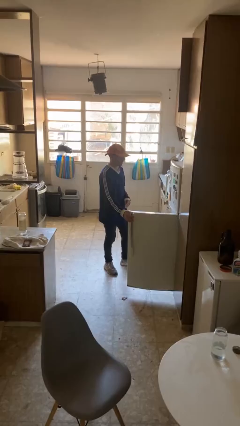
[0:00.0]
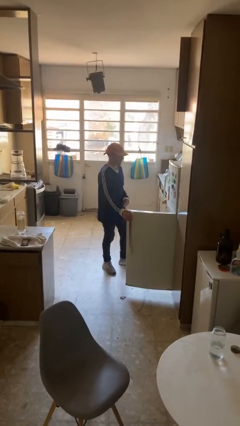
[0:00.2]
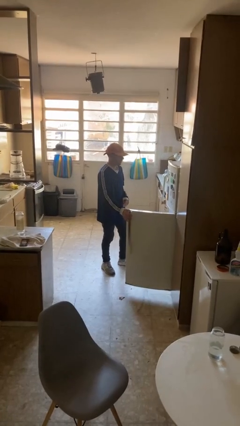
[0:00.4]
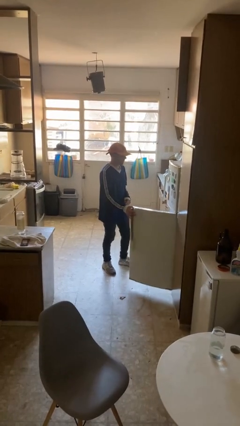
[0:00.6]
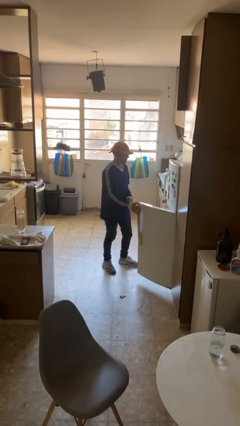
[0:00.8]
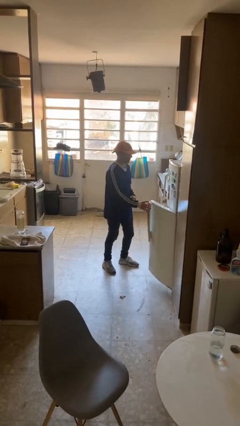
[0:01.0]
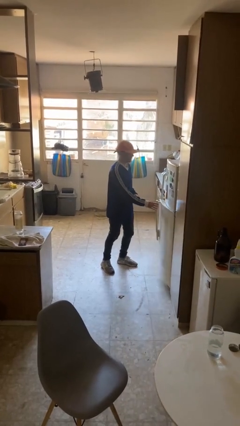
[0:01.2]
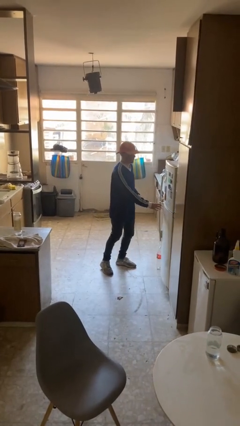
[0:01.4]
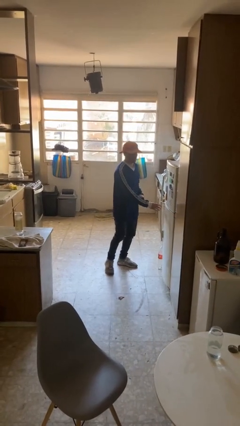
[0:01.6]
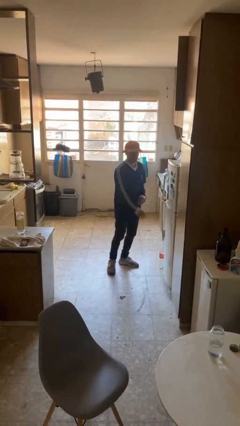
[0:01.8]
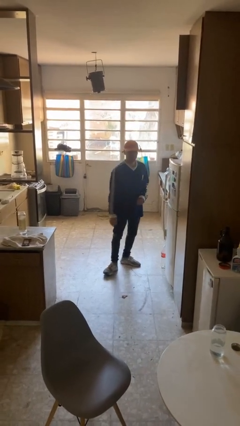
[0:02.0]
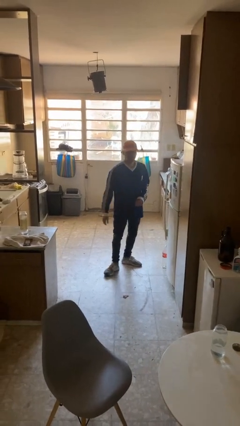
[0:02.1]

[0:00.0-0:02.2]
person closes refrigerator

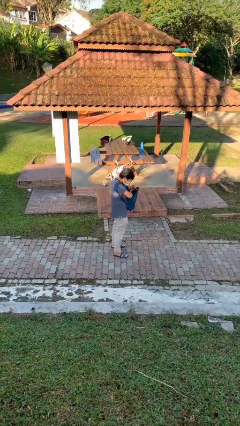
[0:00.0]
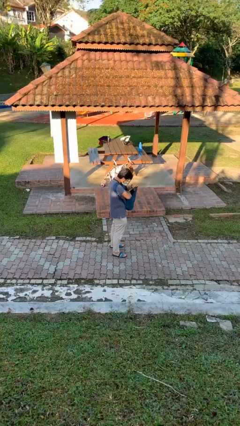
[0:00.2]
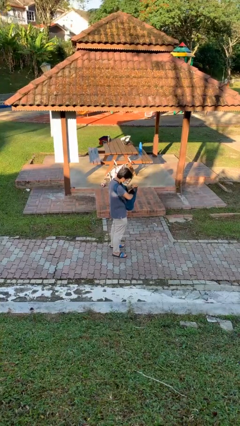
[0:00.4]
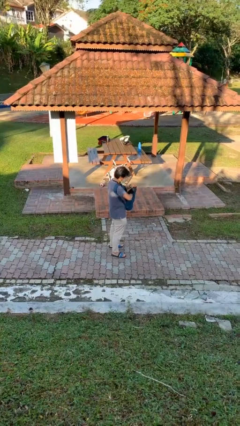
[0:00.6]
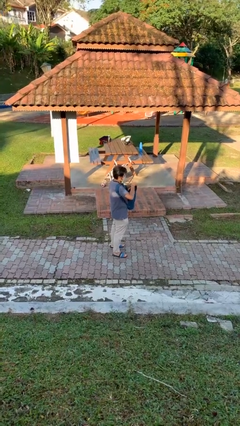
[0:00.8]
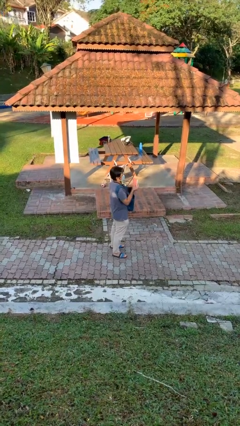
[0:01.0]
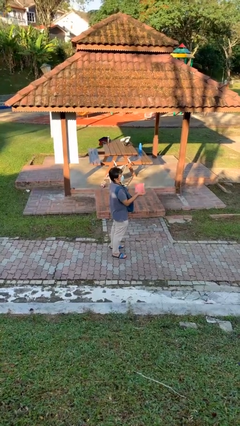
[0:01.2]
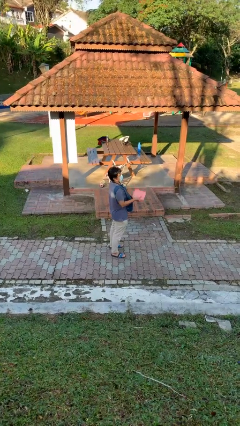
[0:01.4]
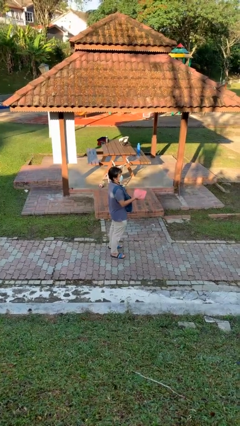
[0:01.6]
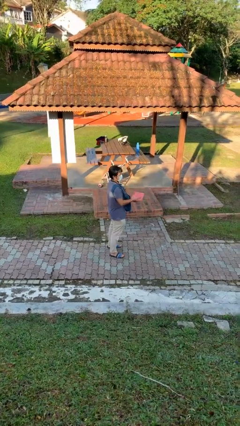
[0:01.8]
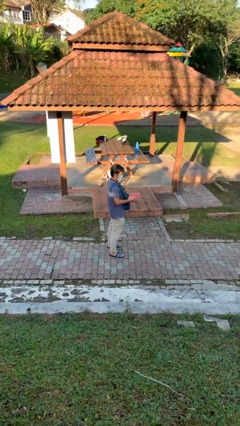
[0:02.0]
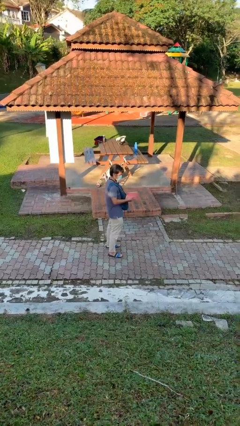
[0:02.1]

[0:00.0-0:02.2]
person takes object from backpack

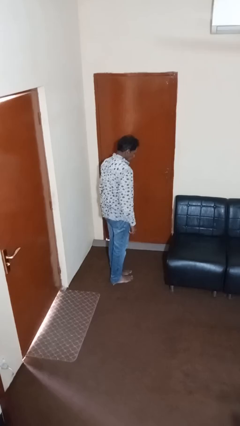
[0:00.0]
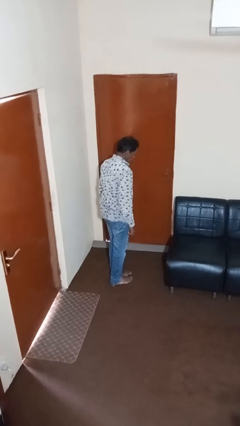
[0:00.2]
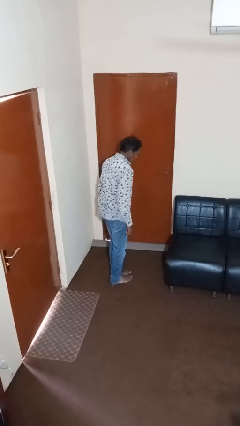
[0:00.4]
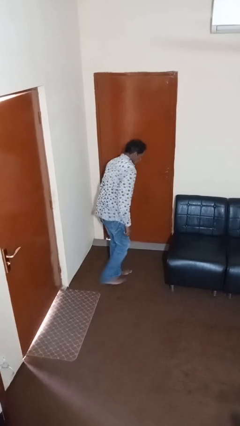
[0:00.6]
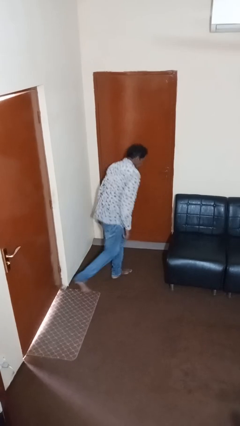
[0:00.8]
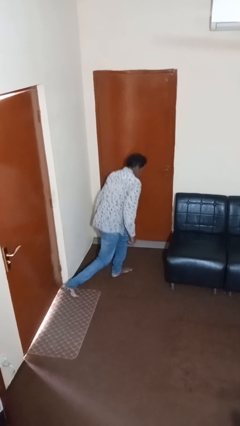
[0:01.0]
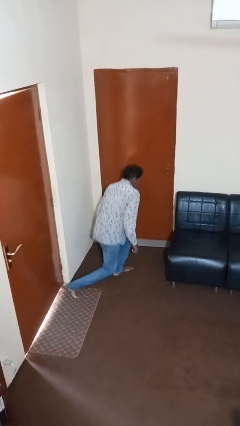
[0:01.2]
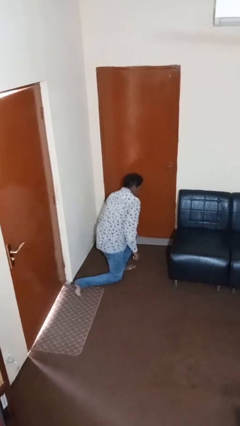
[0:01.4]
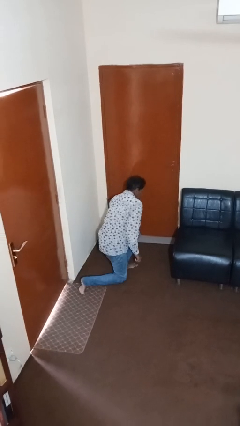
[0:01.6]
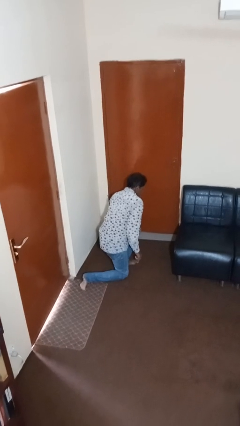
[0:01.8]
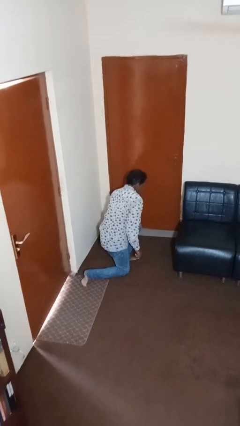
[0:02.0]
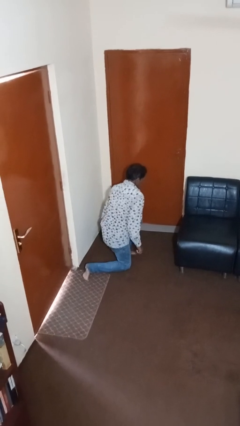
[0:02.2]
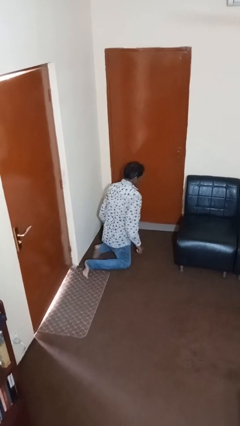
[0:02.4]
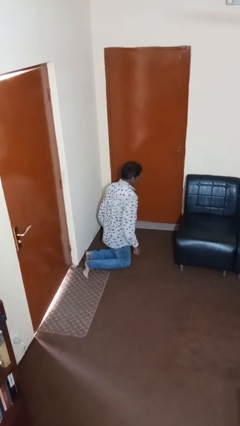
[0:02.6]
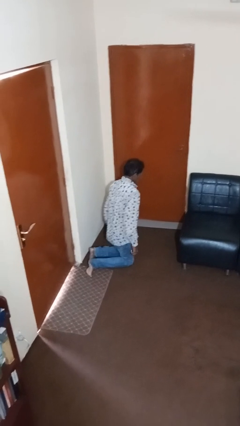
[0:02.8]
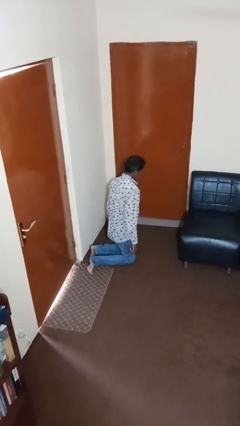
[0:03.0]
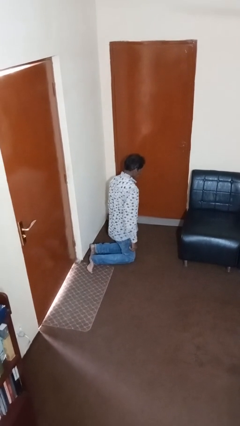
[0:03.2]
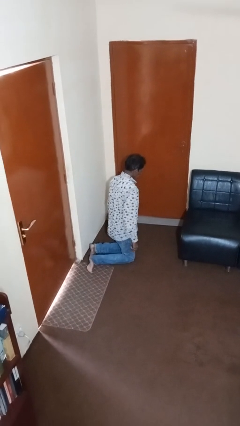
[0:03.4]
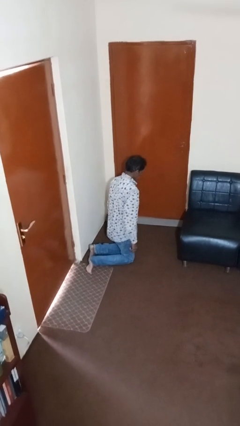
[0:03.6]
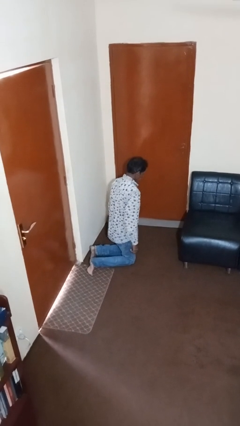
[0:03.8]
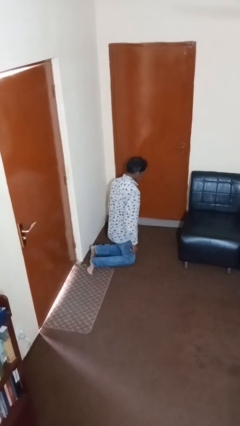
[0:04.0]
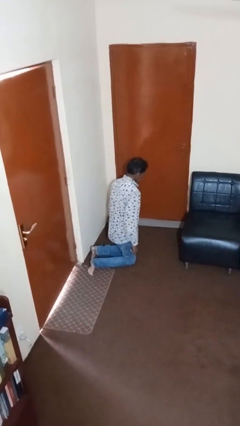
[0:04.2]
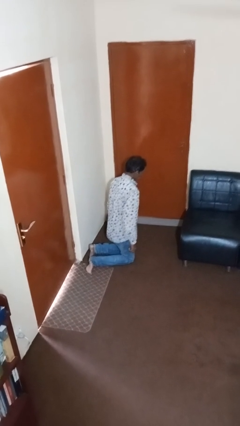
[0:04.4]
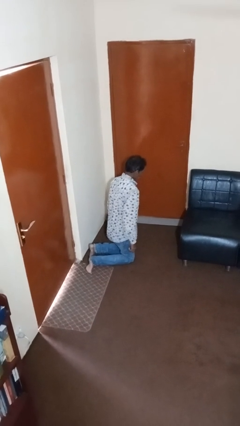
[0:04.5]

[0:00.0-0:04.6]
person squats

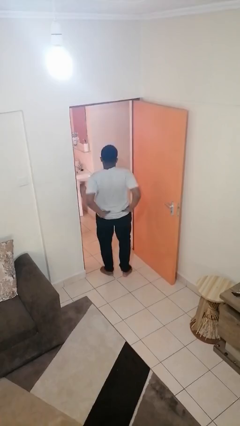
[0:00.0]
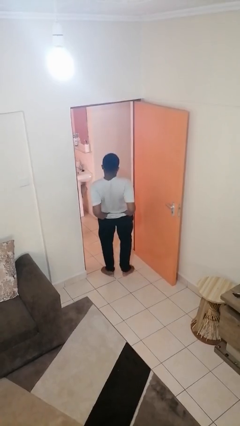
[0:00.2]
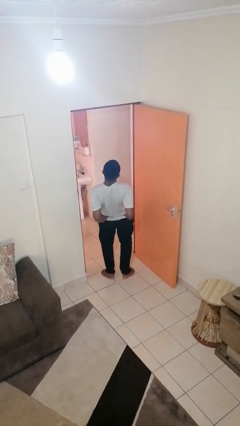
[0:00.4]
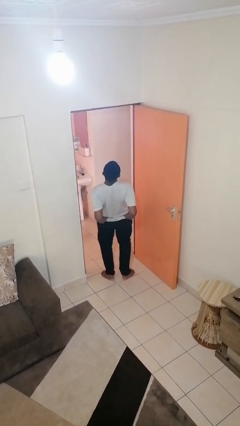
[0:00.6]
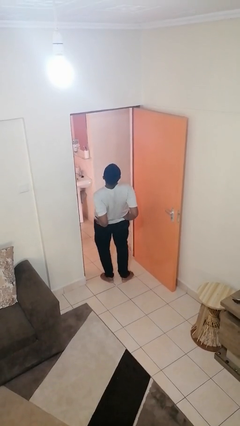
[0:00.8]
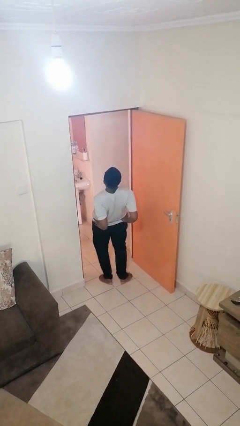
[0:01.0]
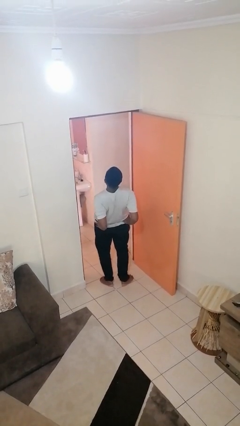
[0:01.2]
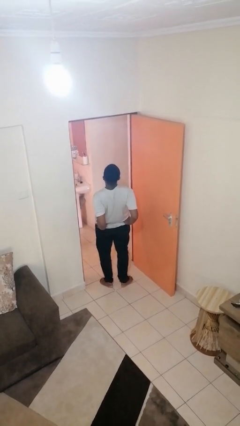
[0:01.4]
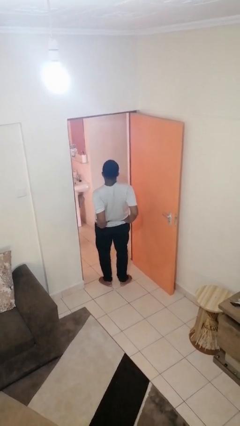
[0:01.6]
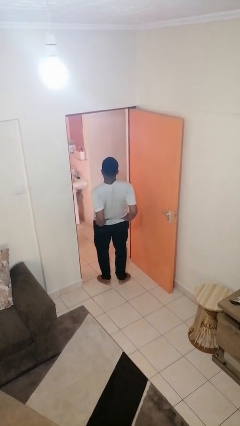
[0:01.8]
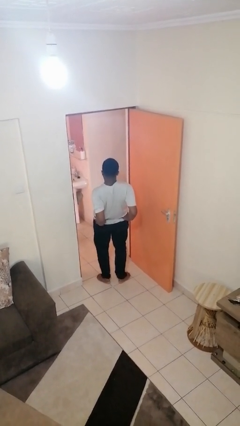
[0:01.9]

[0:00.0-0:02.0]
person stretches back

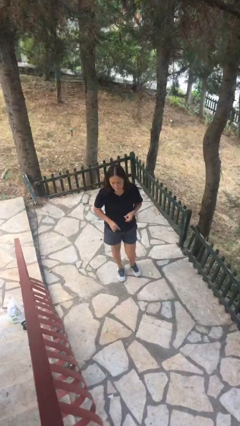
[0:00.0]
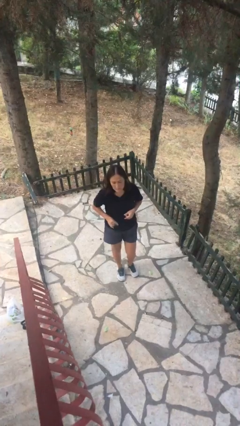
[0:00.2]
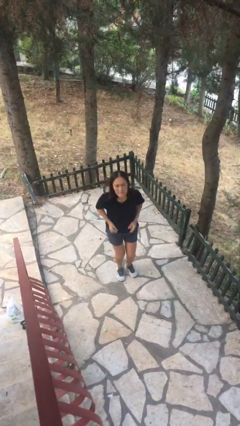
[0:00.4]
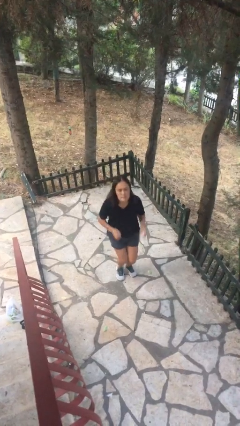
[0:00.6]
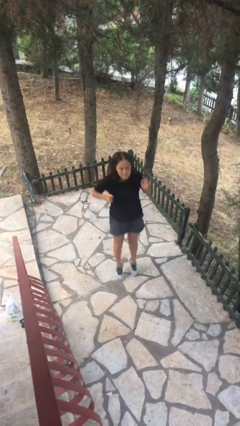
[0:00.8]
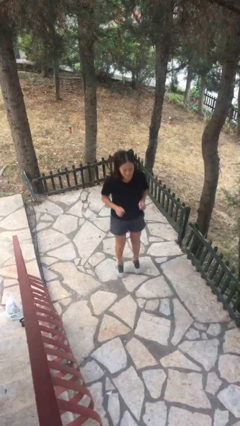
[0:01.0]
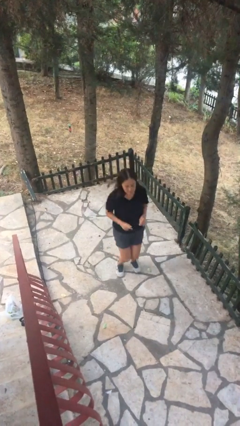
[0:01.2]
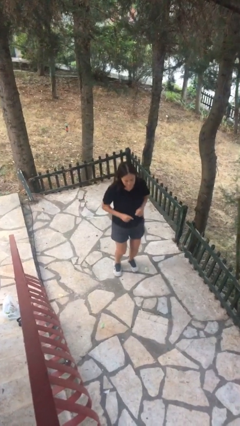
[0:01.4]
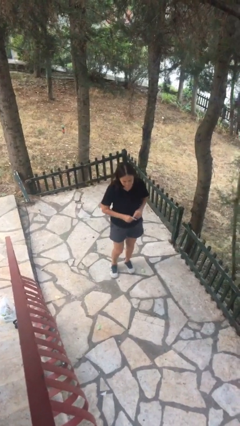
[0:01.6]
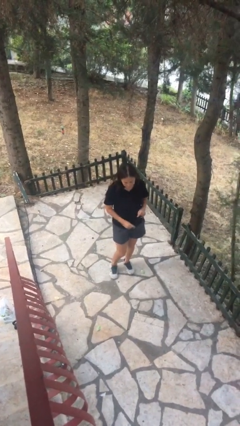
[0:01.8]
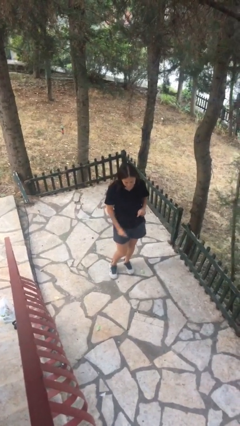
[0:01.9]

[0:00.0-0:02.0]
person jumps

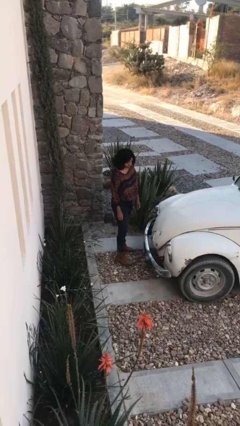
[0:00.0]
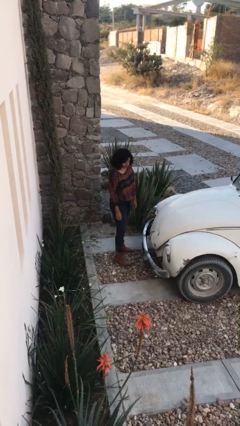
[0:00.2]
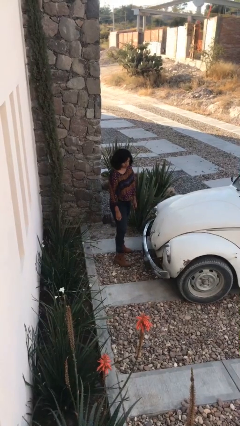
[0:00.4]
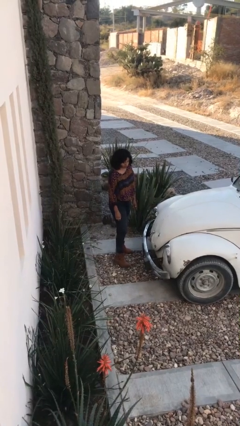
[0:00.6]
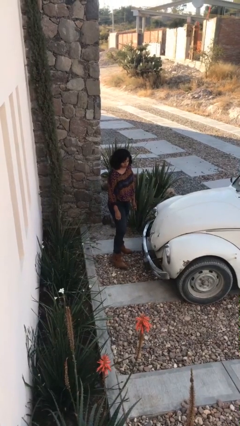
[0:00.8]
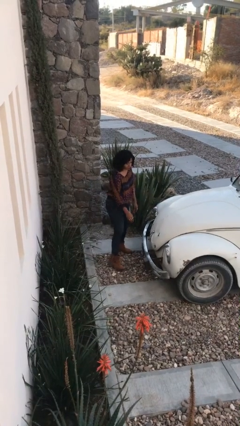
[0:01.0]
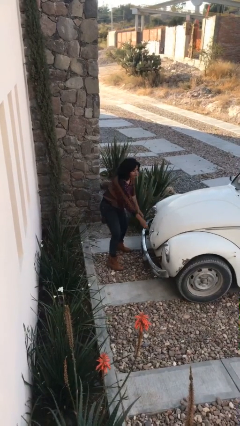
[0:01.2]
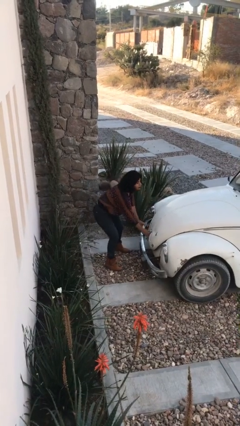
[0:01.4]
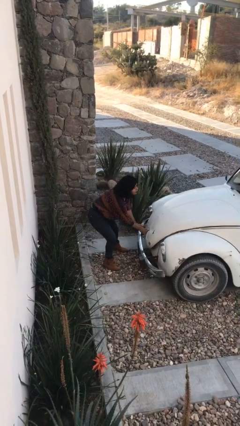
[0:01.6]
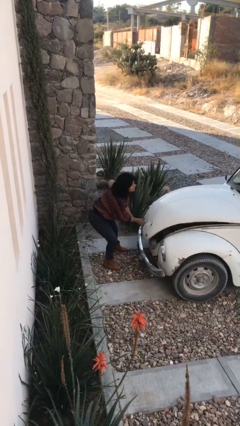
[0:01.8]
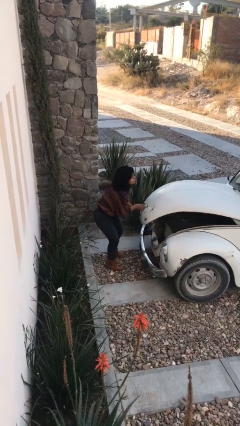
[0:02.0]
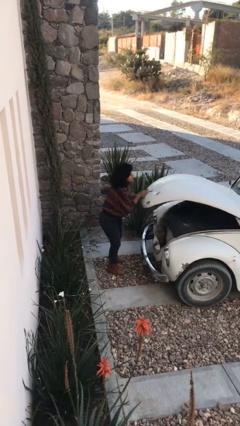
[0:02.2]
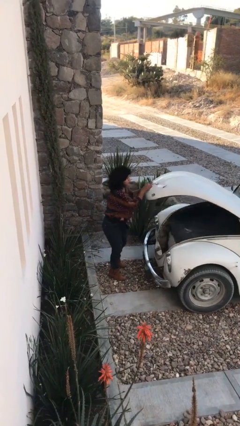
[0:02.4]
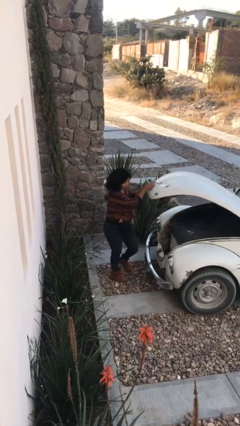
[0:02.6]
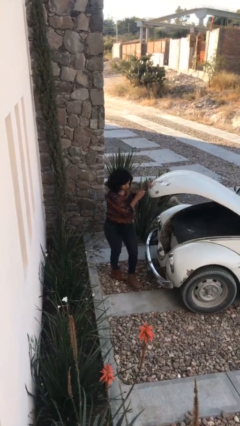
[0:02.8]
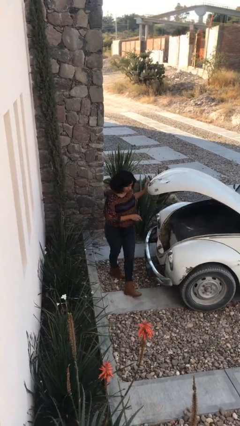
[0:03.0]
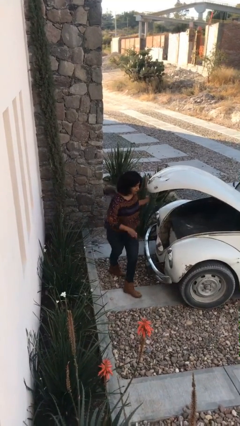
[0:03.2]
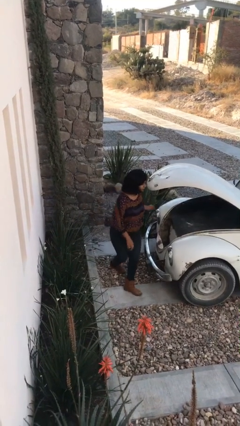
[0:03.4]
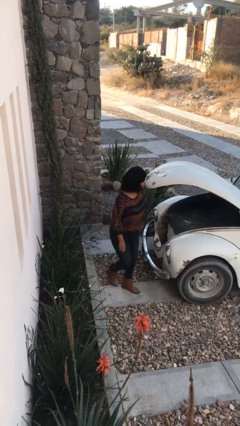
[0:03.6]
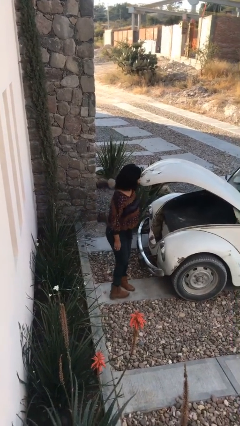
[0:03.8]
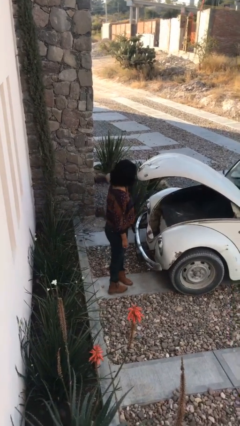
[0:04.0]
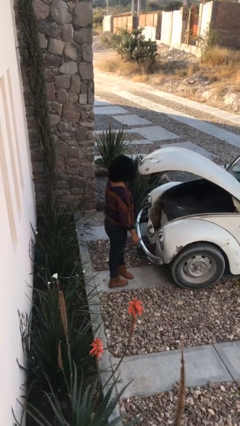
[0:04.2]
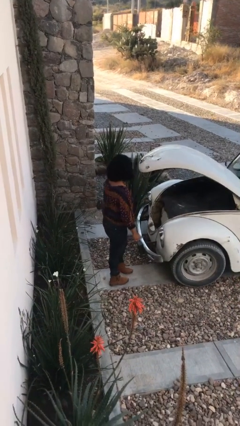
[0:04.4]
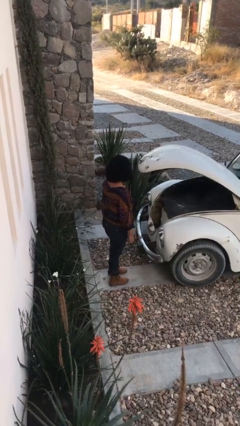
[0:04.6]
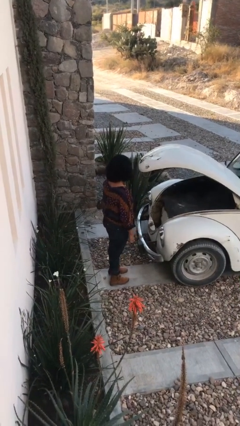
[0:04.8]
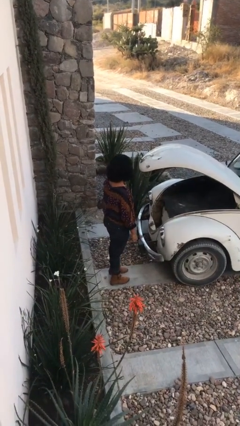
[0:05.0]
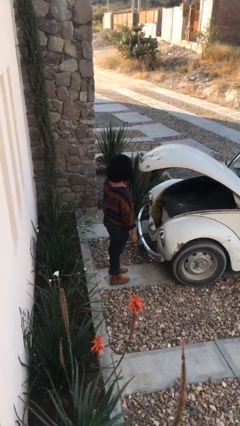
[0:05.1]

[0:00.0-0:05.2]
person opens car trunk
